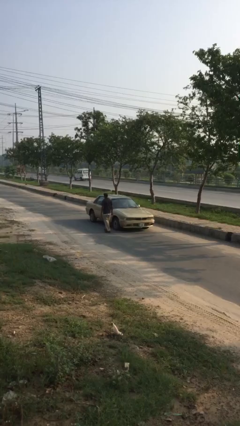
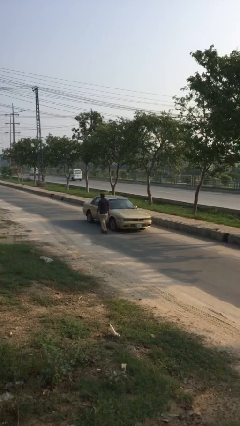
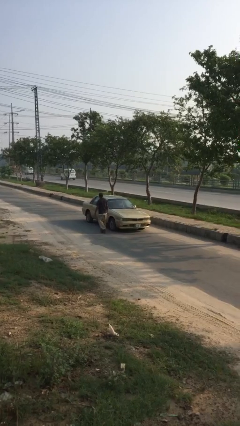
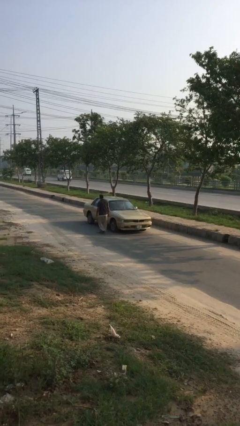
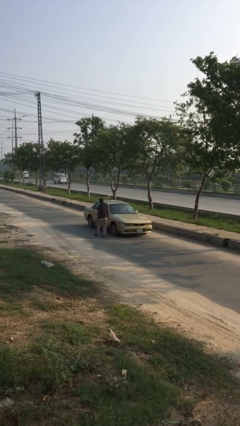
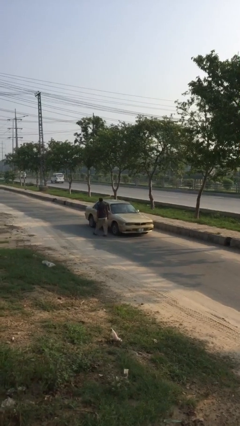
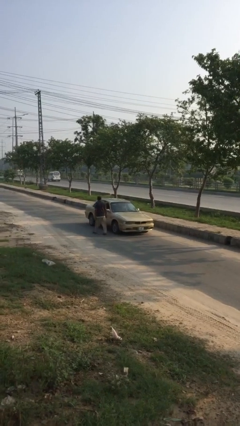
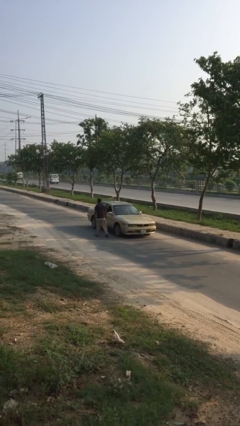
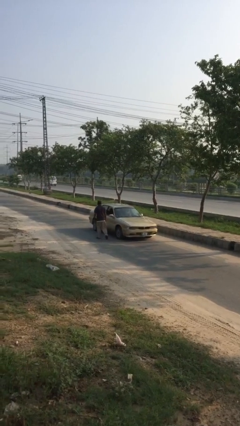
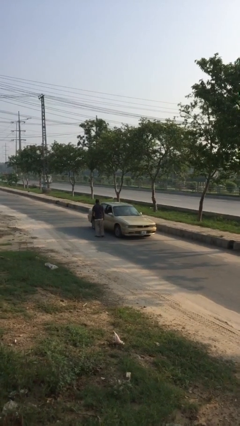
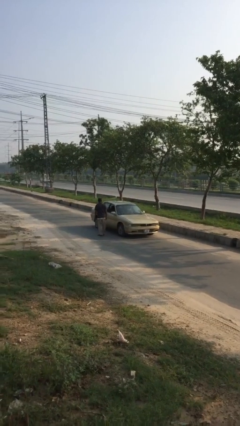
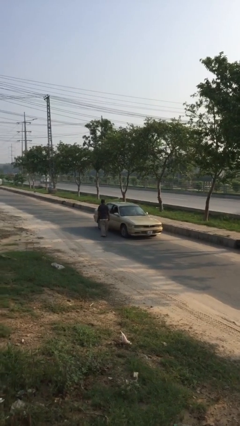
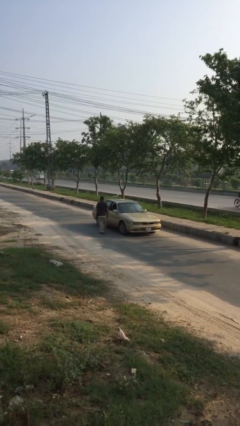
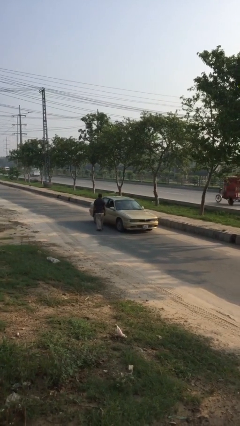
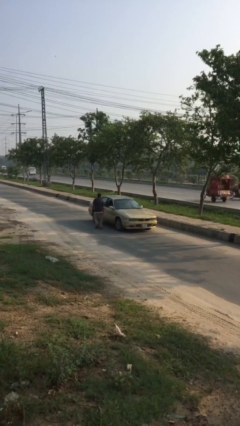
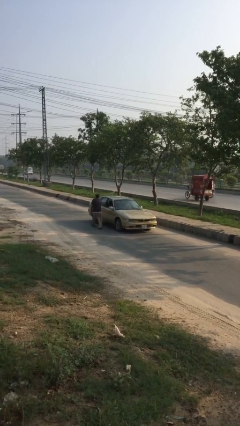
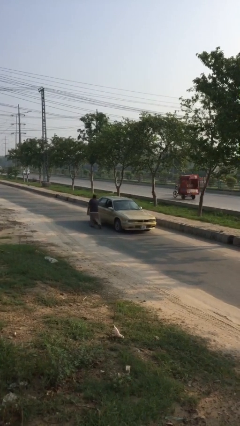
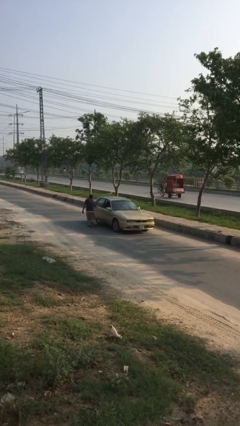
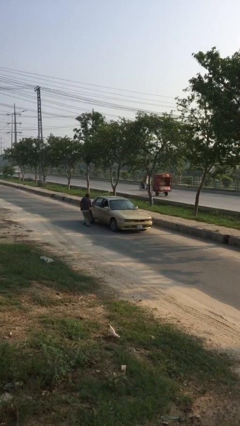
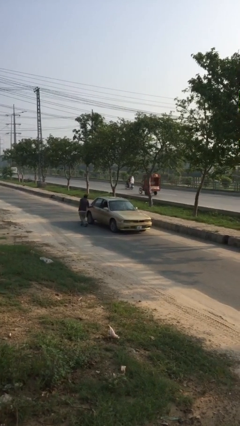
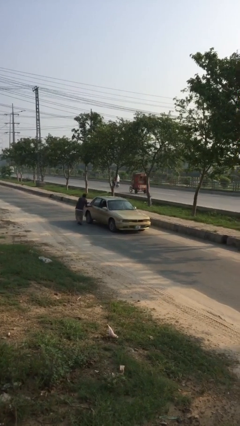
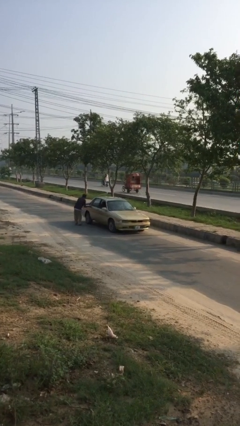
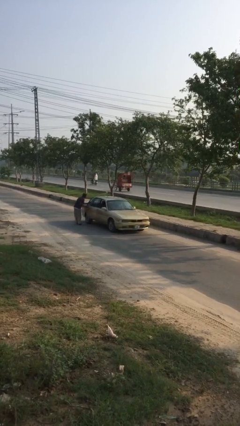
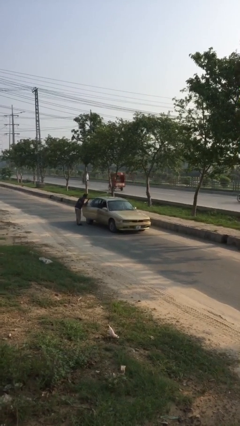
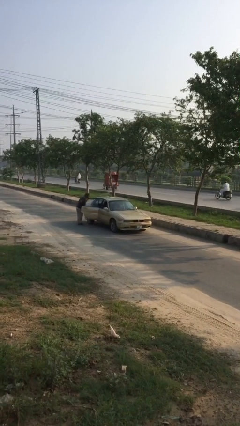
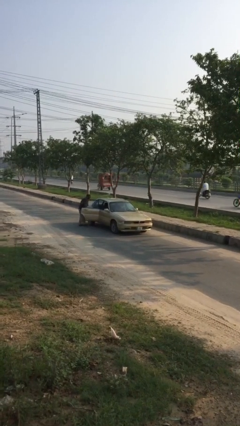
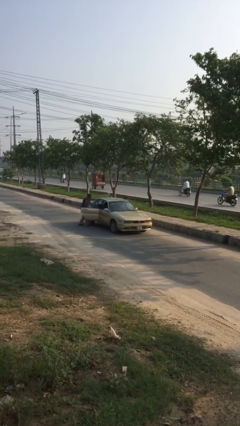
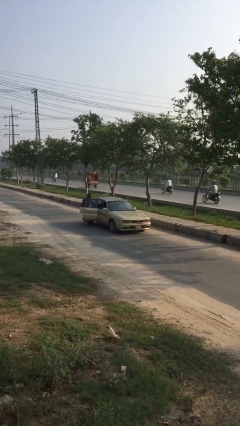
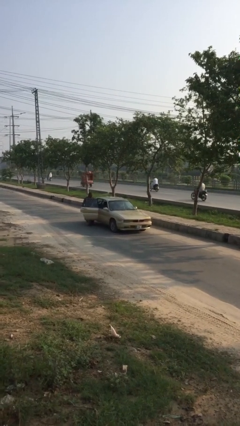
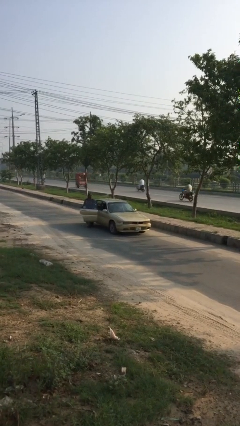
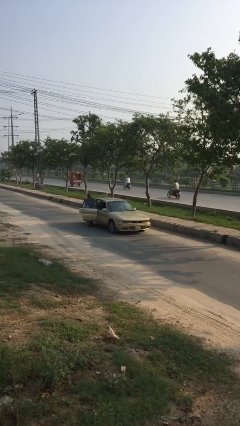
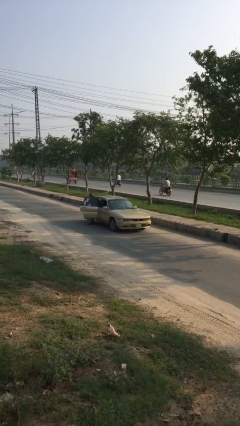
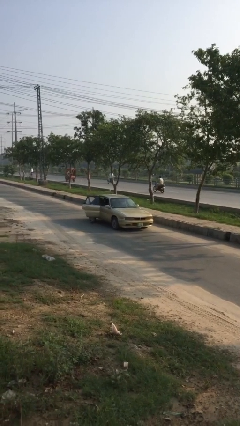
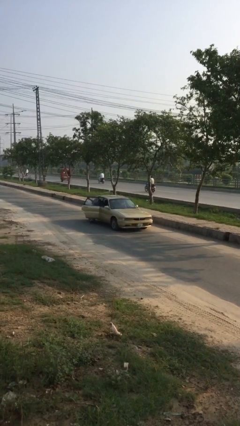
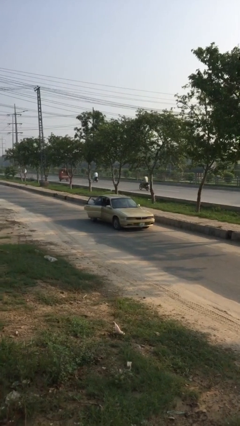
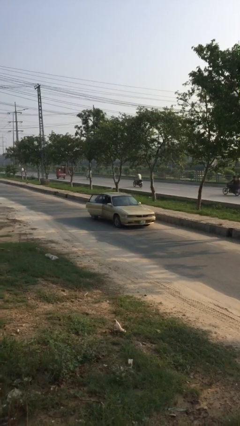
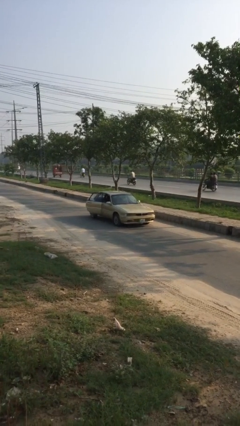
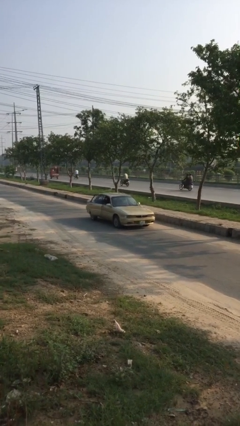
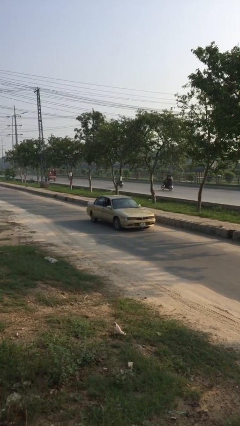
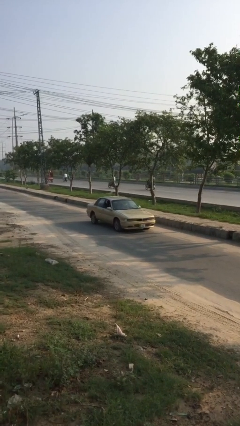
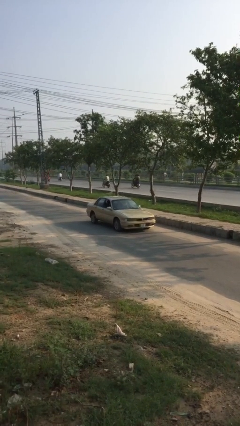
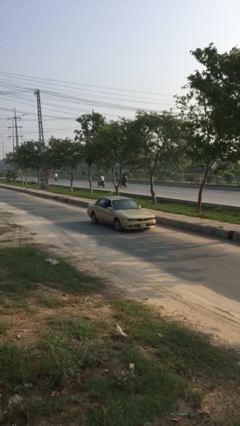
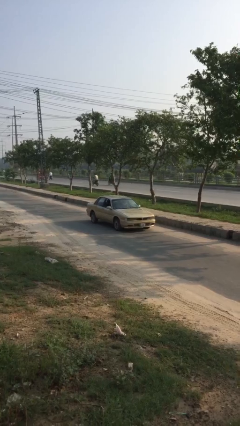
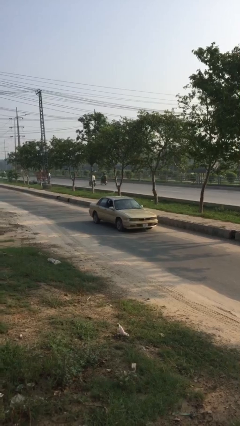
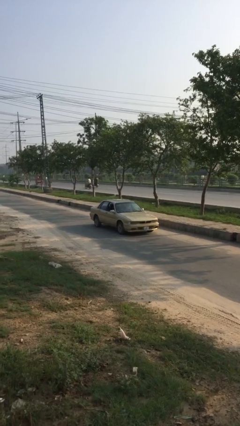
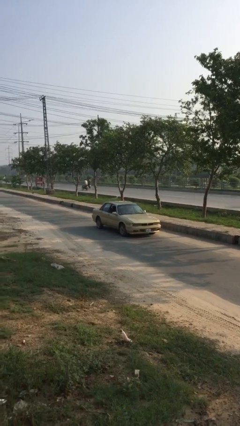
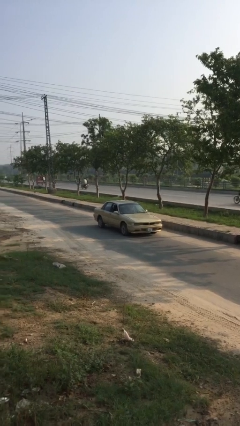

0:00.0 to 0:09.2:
car picks up person

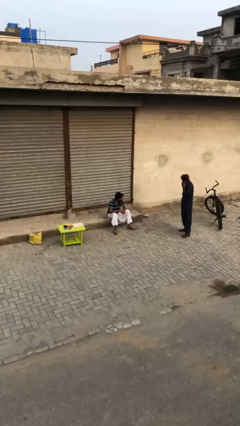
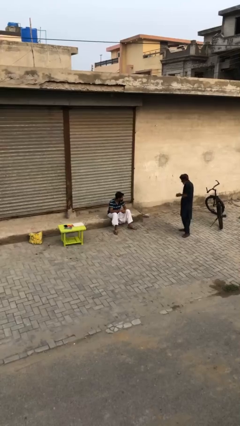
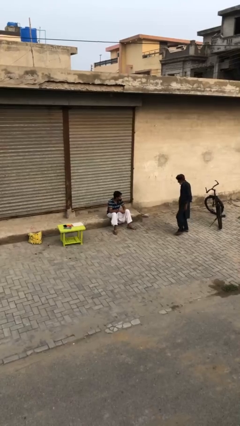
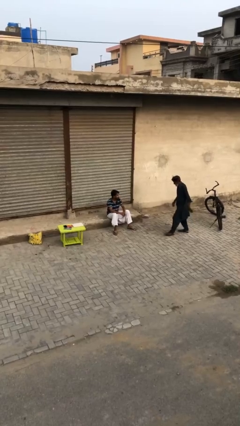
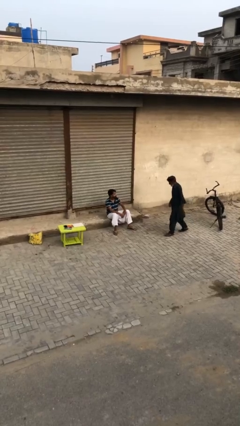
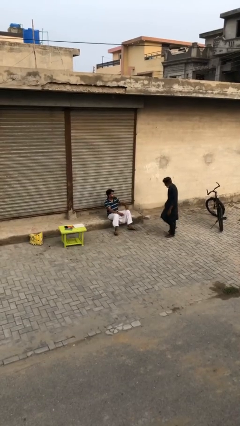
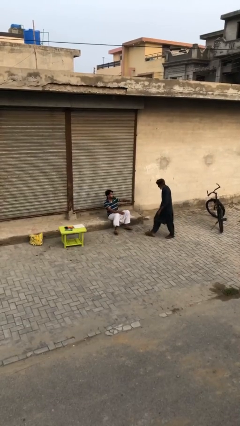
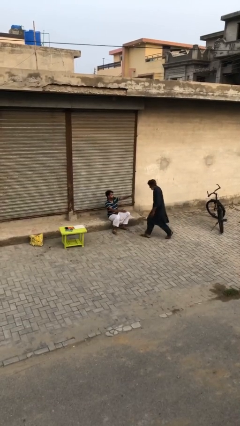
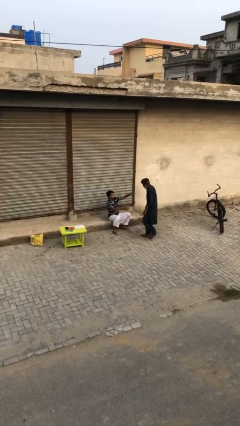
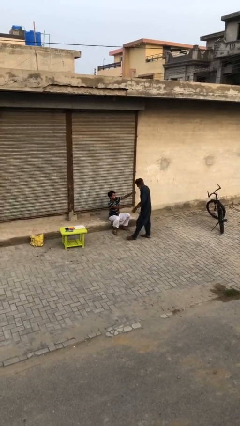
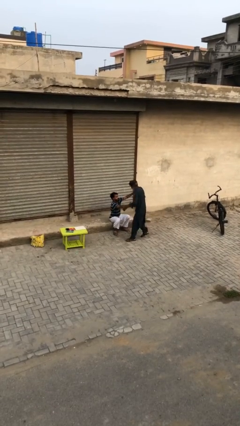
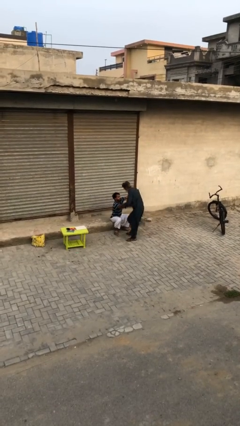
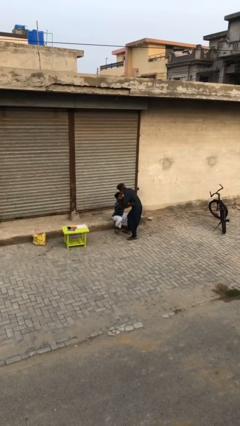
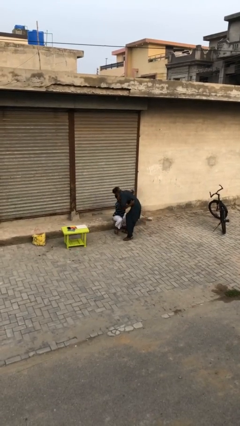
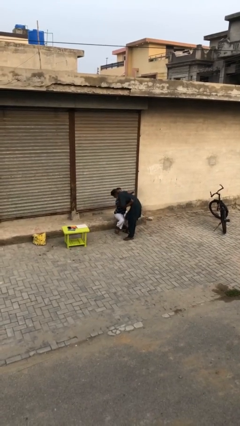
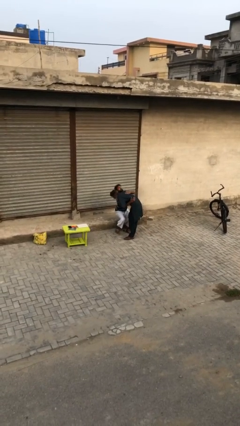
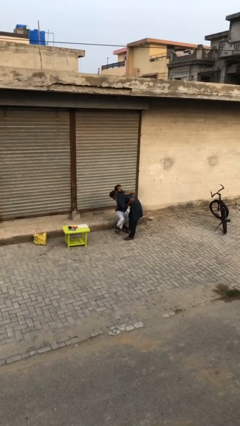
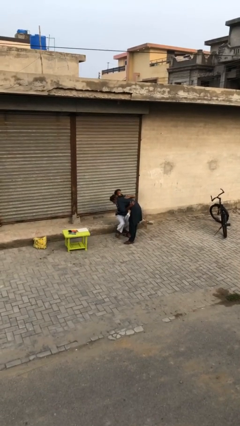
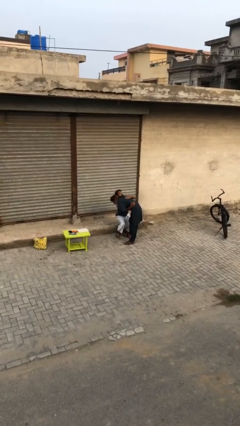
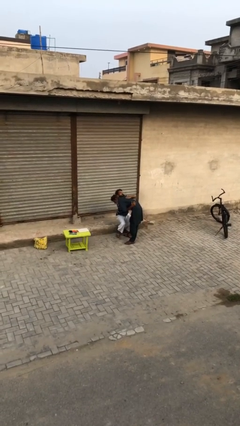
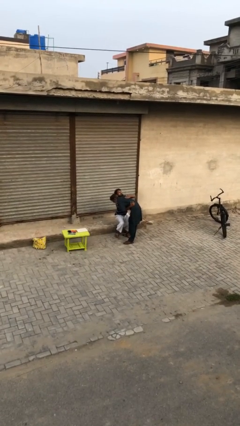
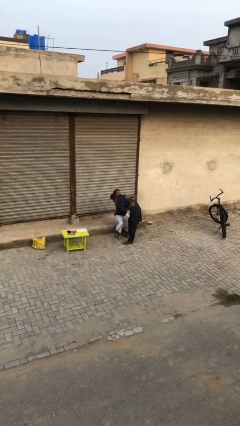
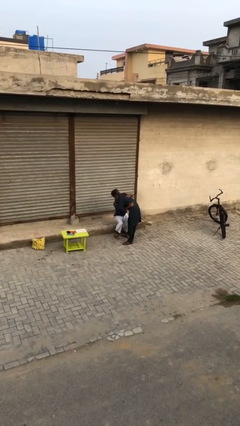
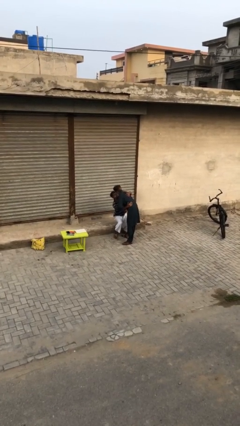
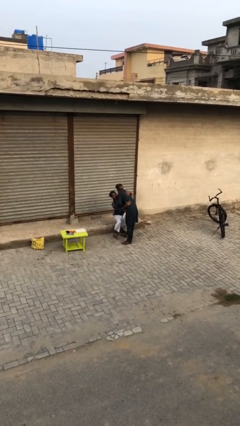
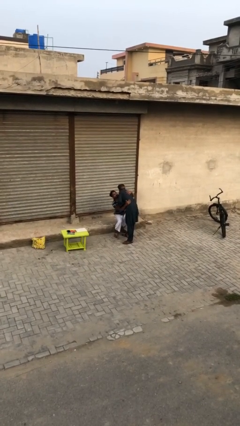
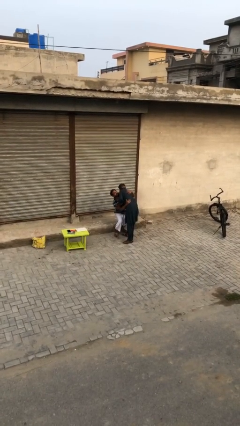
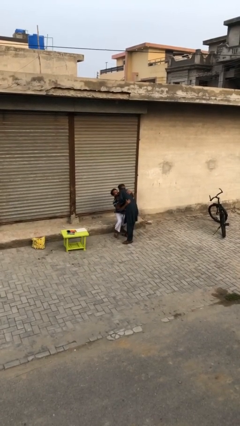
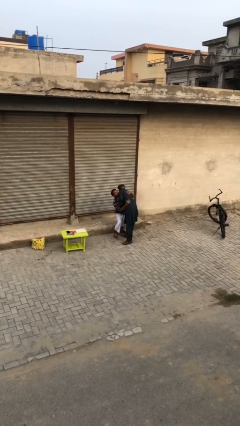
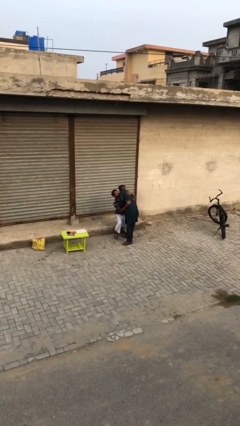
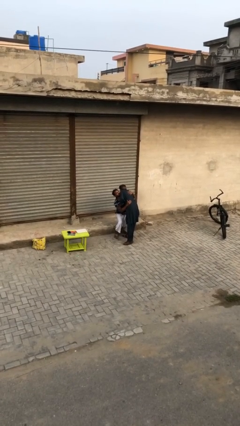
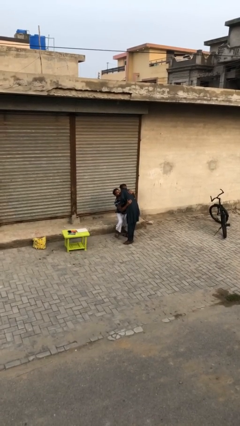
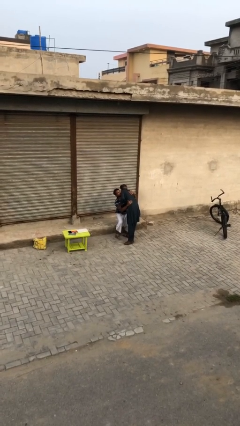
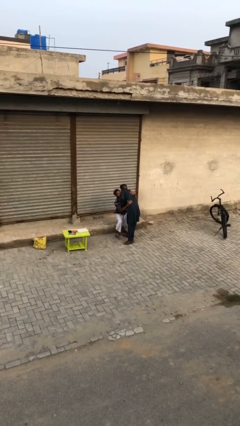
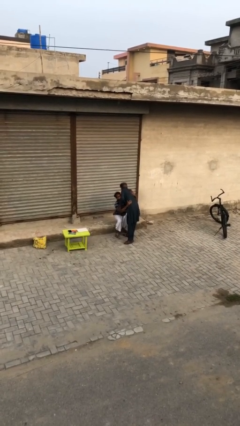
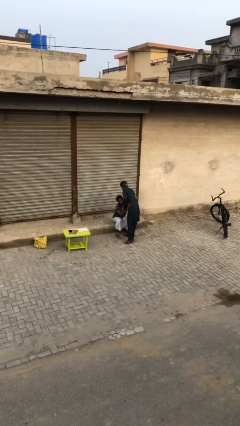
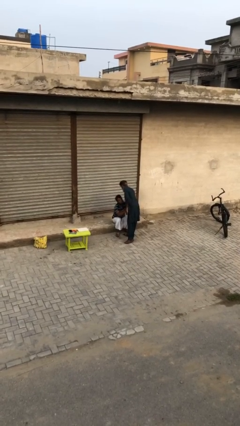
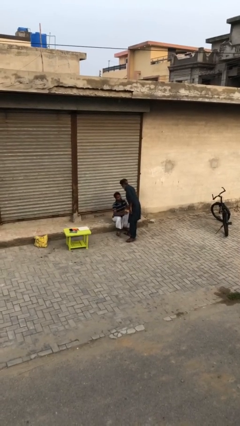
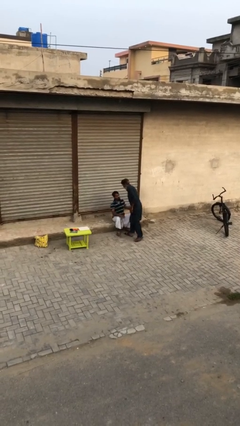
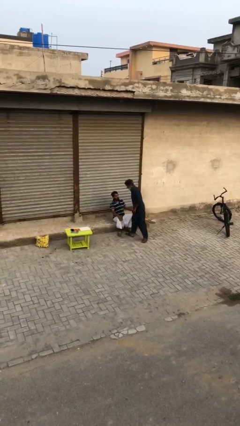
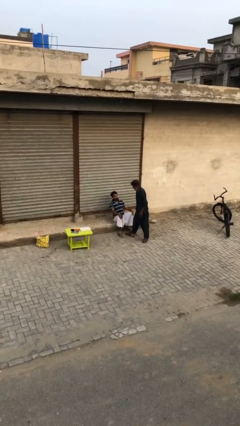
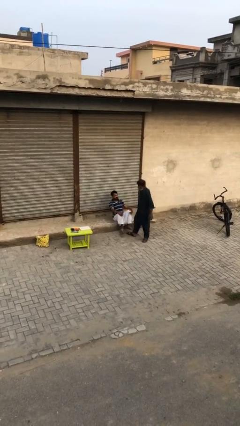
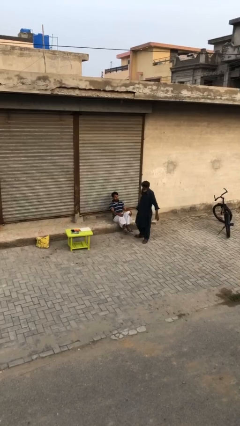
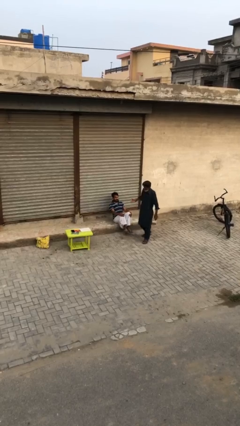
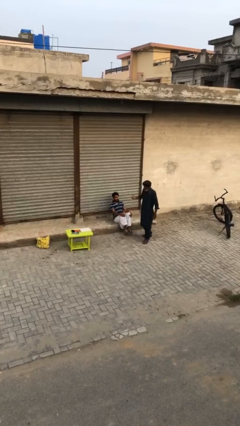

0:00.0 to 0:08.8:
person embraces person
